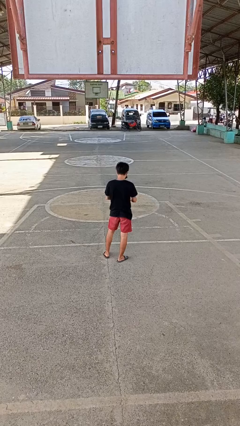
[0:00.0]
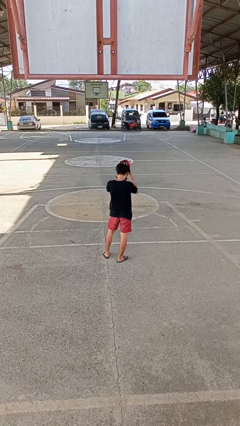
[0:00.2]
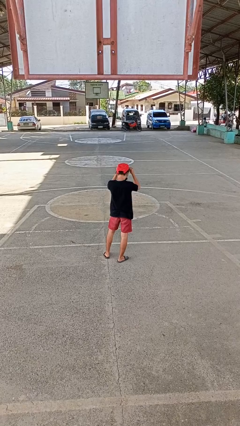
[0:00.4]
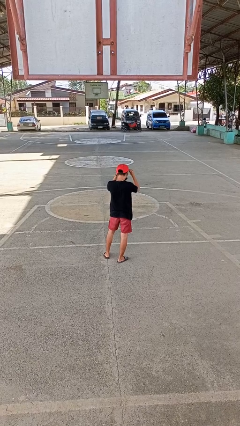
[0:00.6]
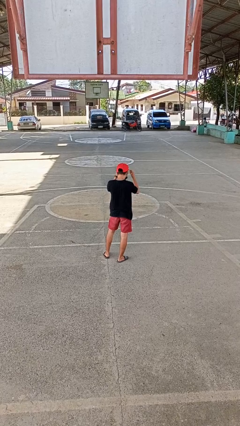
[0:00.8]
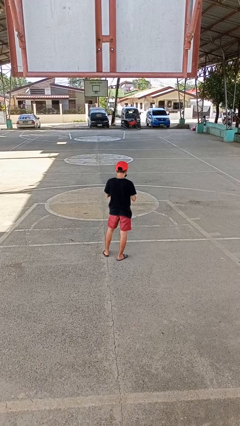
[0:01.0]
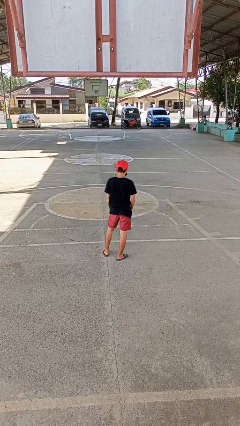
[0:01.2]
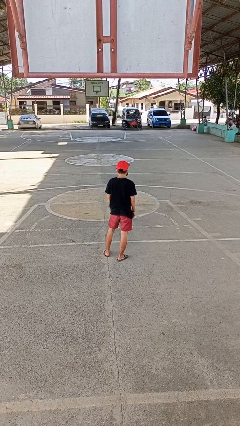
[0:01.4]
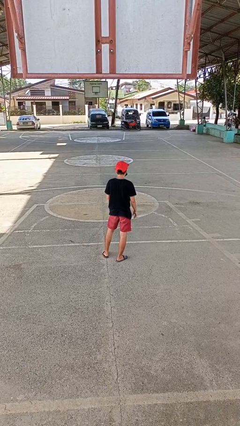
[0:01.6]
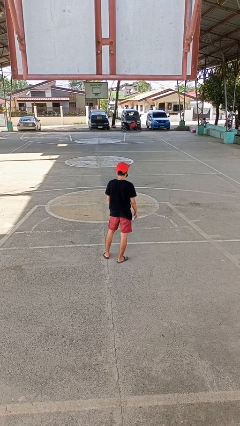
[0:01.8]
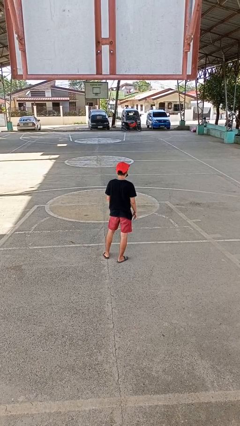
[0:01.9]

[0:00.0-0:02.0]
person puts on hat

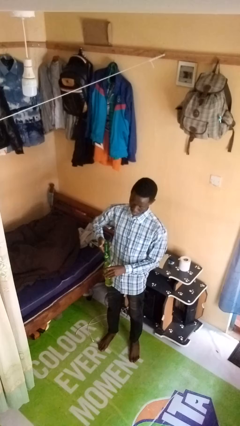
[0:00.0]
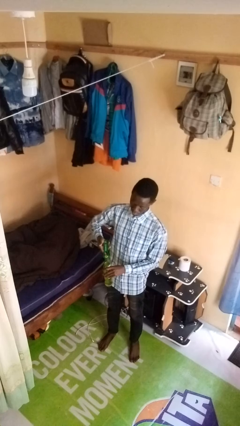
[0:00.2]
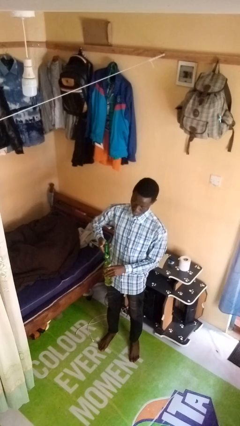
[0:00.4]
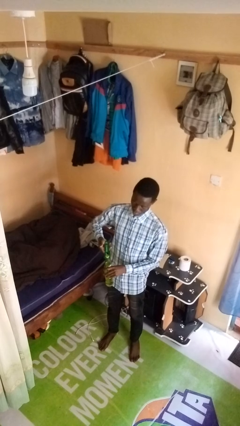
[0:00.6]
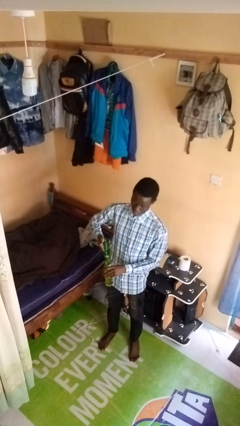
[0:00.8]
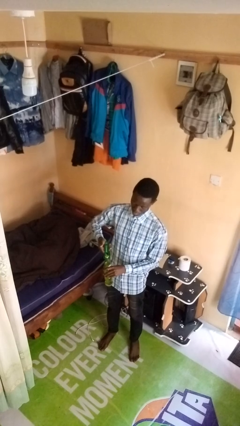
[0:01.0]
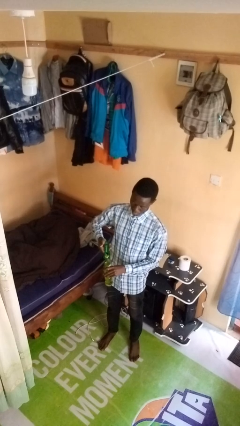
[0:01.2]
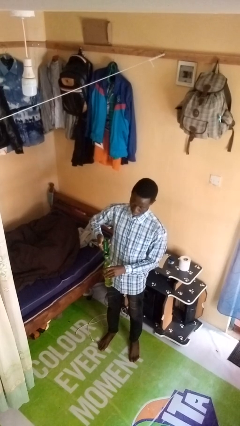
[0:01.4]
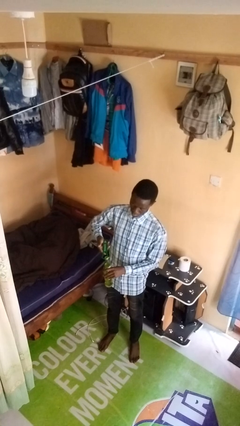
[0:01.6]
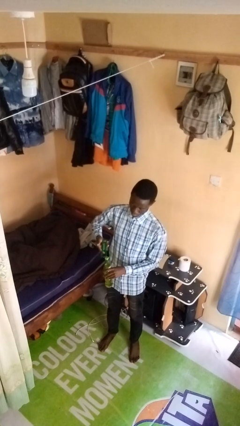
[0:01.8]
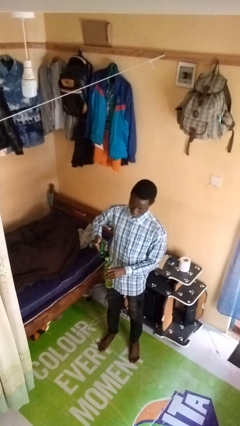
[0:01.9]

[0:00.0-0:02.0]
person opens can with can opener

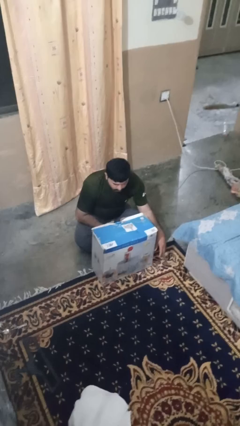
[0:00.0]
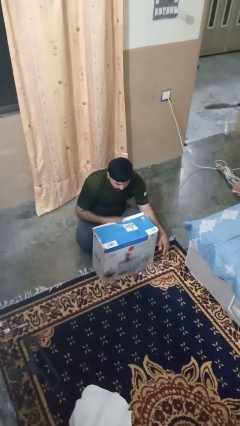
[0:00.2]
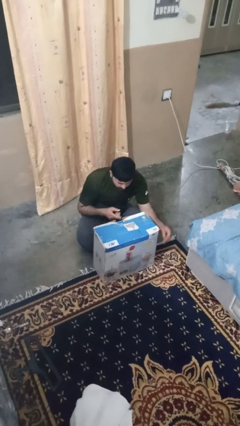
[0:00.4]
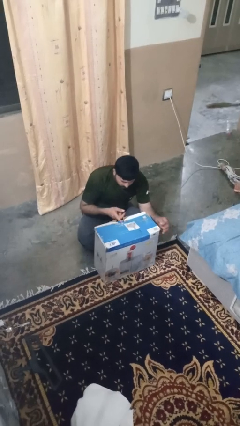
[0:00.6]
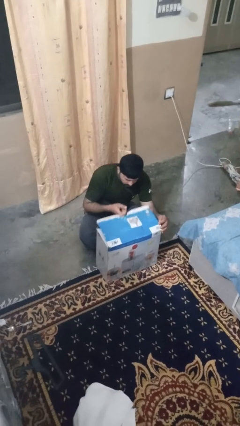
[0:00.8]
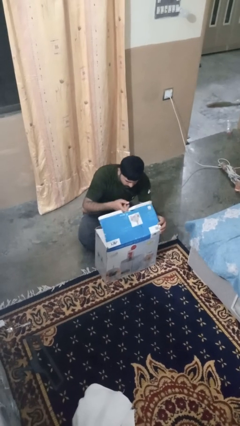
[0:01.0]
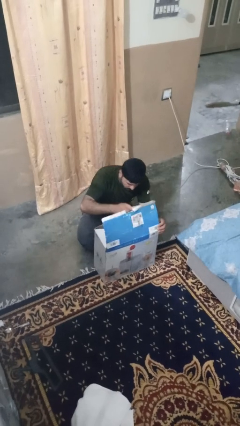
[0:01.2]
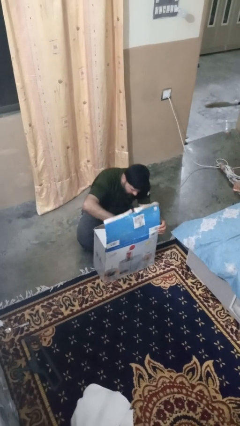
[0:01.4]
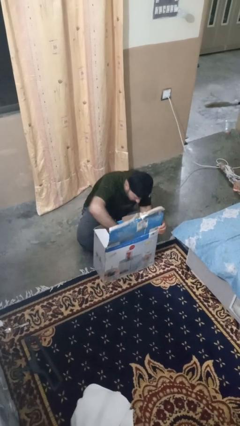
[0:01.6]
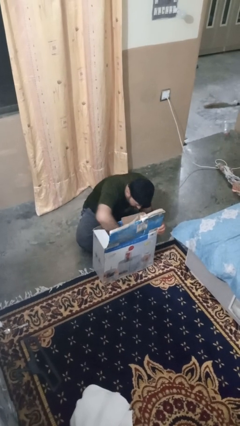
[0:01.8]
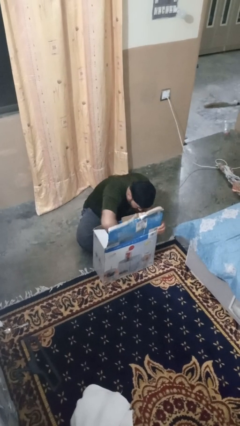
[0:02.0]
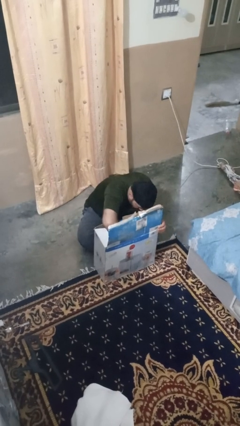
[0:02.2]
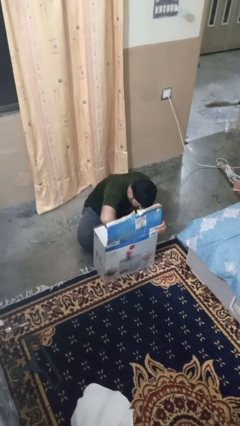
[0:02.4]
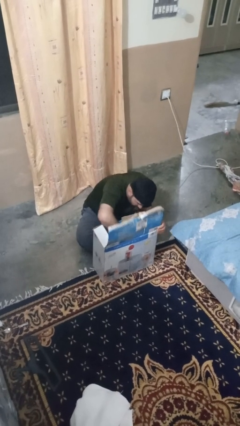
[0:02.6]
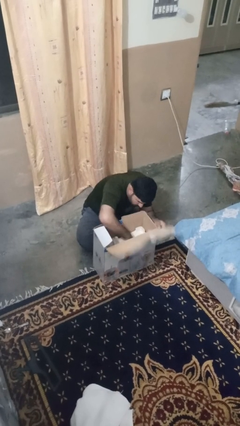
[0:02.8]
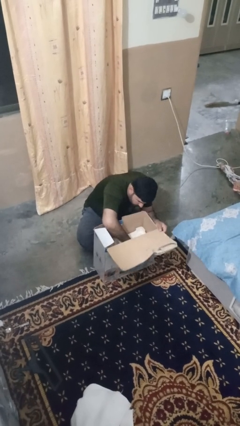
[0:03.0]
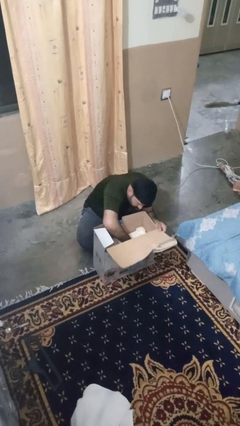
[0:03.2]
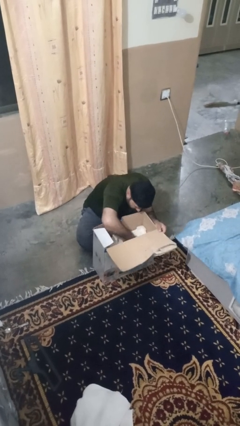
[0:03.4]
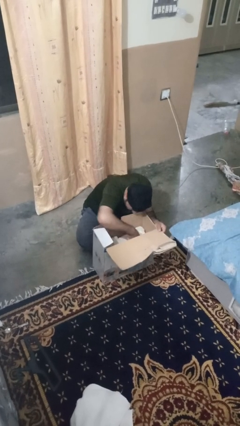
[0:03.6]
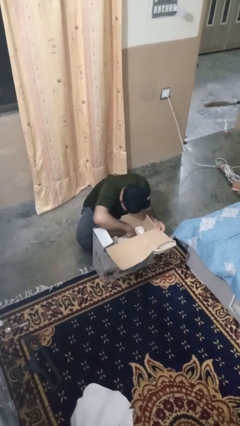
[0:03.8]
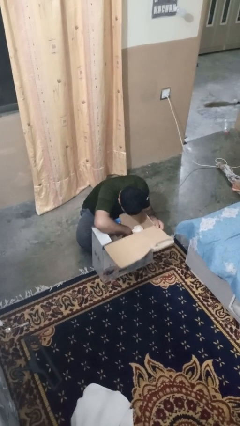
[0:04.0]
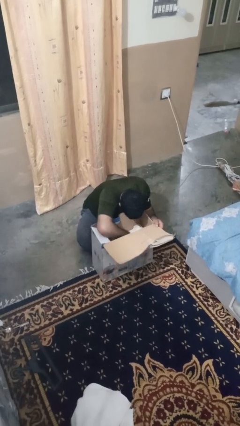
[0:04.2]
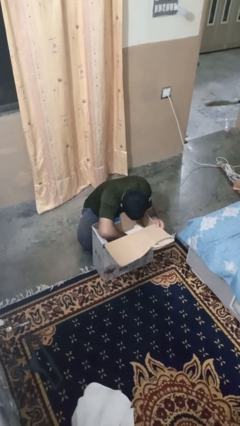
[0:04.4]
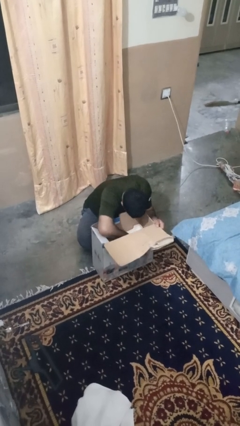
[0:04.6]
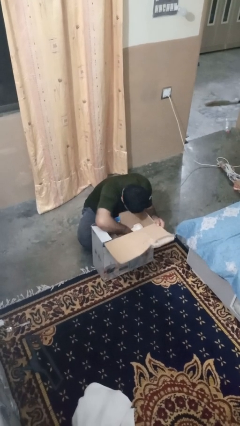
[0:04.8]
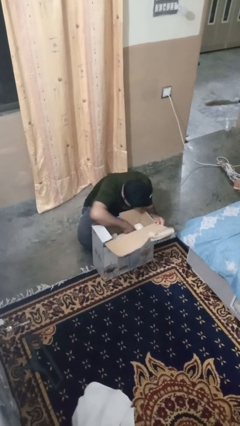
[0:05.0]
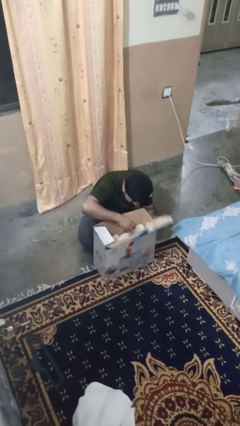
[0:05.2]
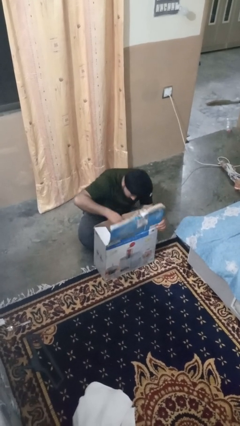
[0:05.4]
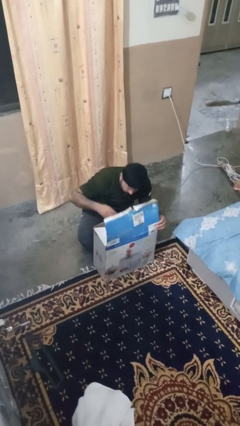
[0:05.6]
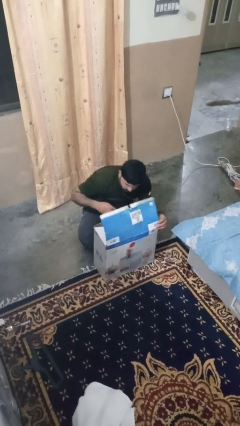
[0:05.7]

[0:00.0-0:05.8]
person searches in box

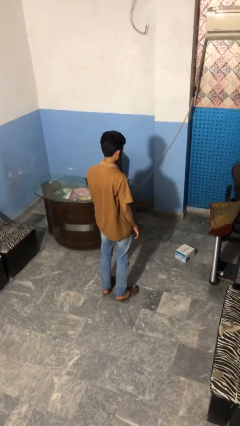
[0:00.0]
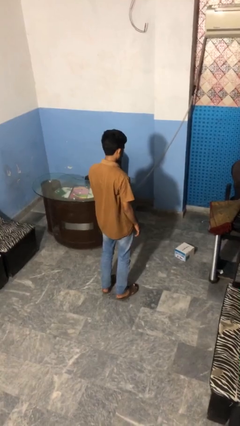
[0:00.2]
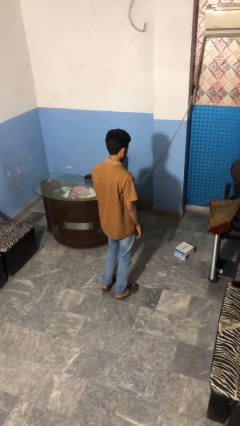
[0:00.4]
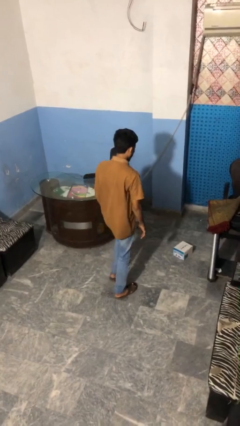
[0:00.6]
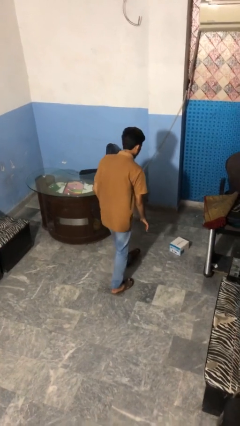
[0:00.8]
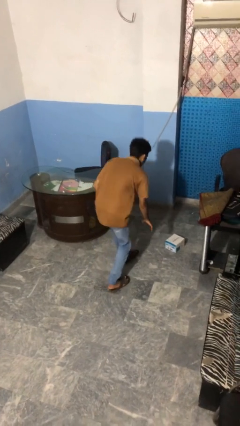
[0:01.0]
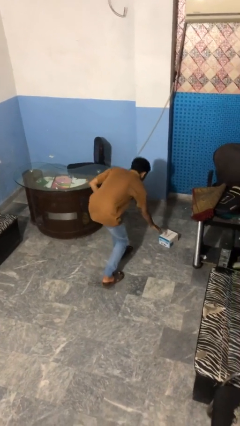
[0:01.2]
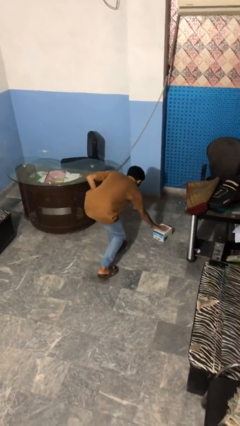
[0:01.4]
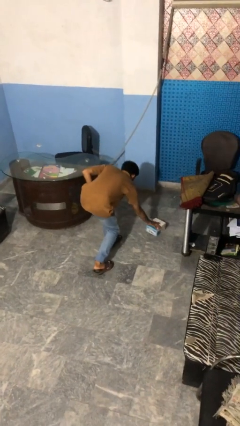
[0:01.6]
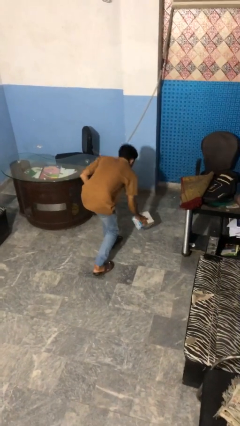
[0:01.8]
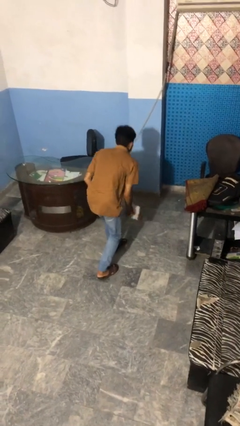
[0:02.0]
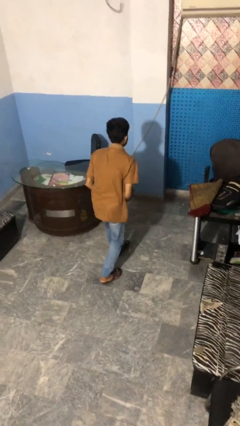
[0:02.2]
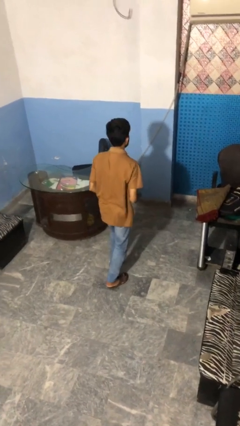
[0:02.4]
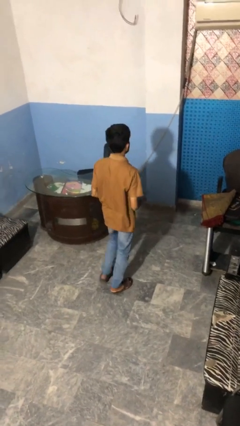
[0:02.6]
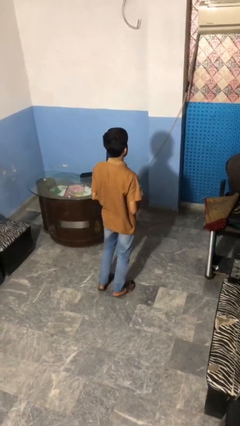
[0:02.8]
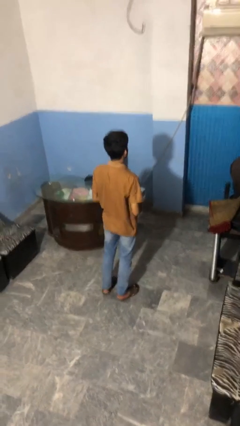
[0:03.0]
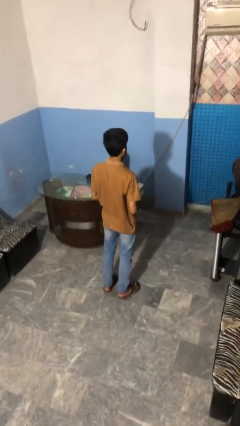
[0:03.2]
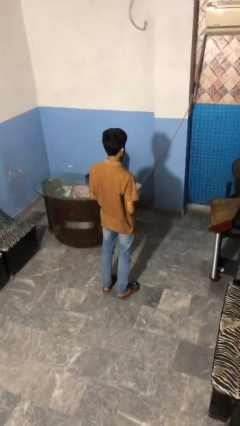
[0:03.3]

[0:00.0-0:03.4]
person picks up object from floor

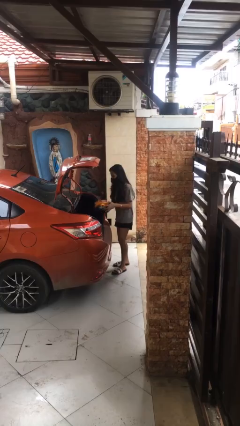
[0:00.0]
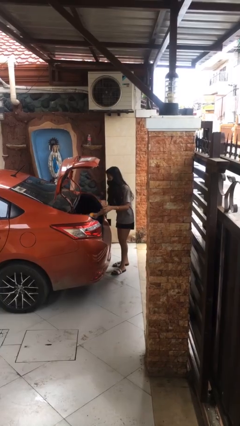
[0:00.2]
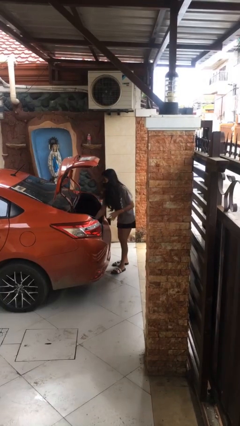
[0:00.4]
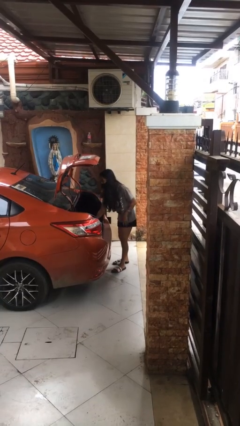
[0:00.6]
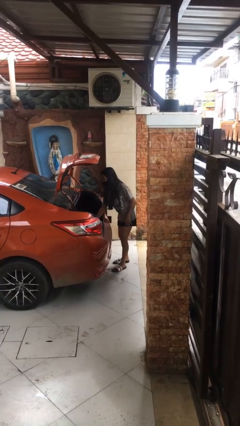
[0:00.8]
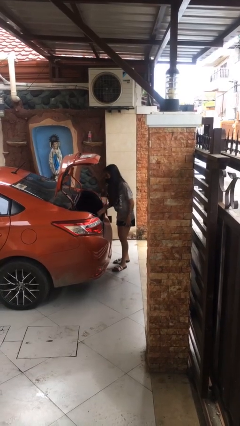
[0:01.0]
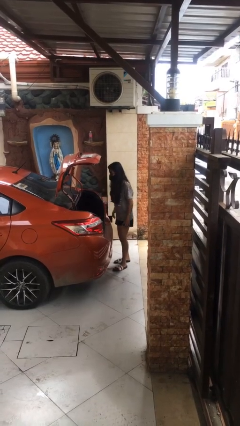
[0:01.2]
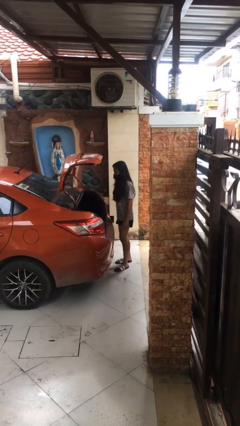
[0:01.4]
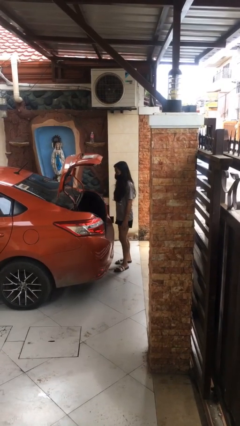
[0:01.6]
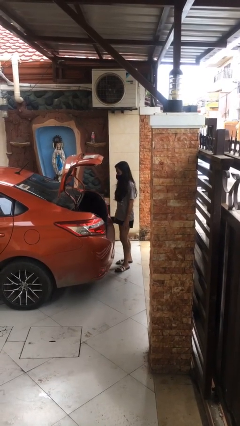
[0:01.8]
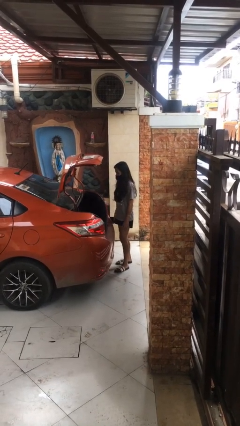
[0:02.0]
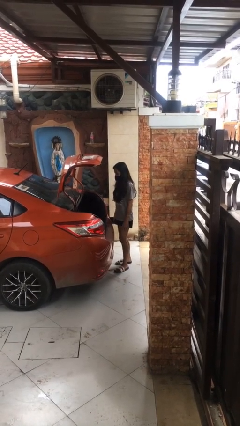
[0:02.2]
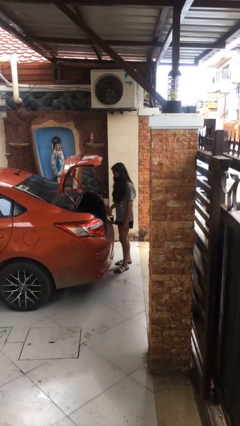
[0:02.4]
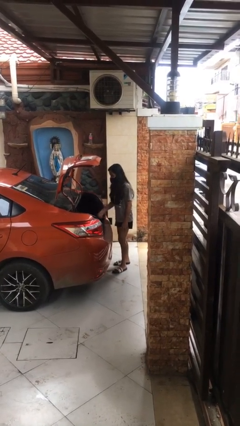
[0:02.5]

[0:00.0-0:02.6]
person loads car

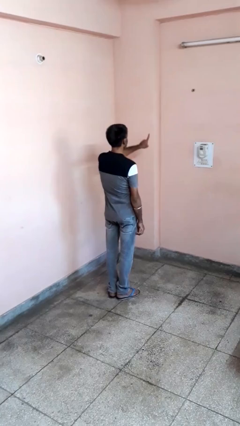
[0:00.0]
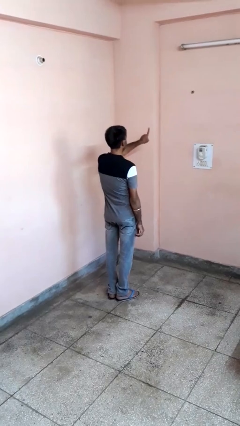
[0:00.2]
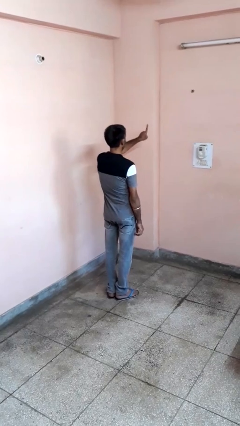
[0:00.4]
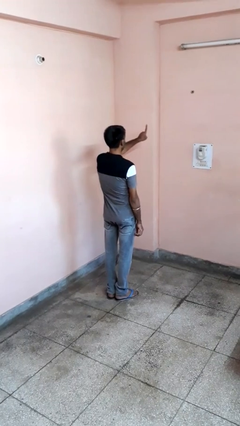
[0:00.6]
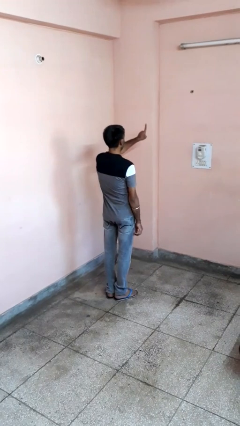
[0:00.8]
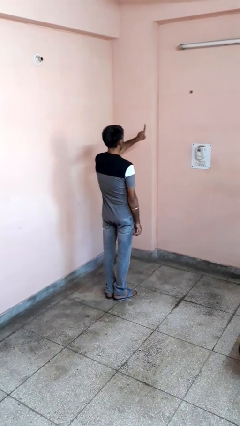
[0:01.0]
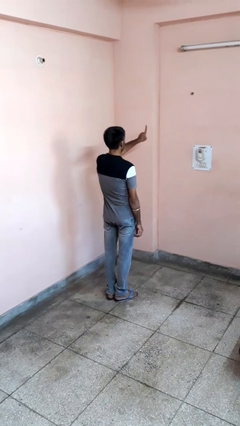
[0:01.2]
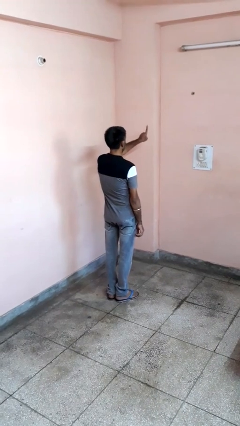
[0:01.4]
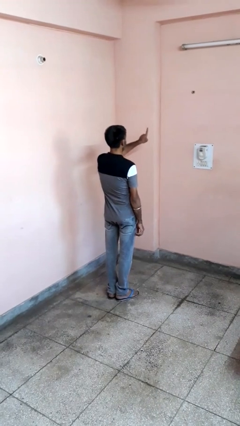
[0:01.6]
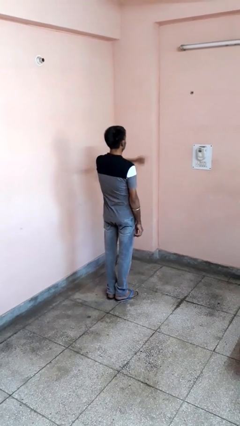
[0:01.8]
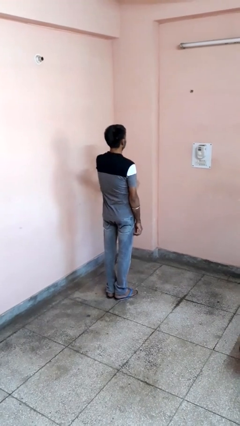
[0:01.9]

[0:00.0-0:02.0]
person gestures number one
